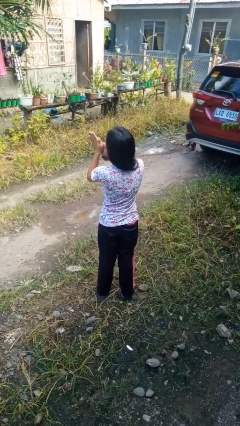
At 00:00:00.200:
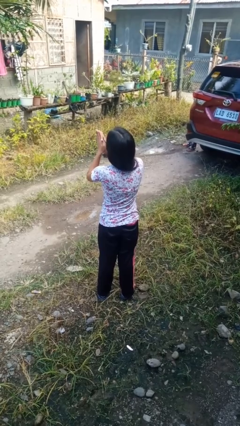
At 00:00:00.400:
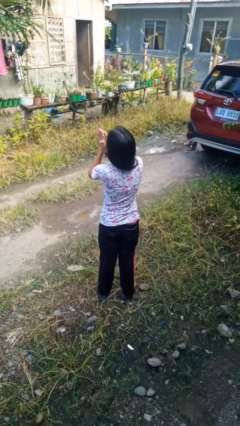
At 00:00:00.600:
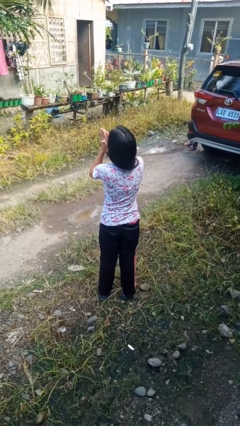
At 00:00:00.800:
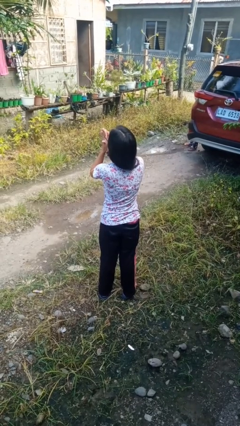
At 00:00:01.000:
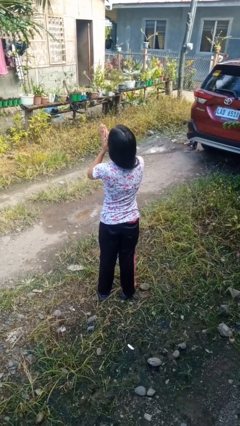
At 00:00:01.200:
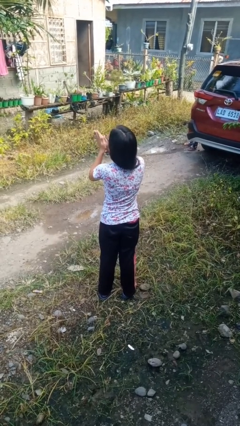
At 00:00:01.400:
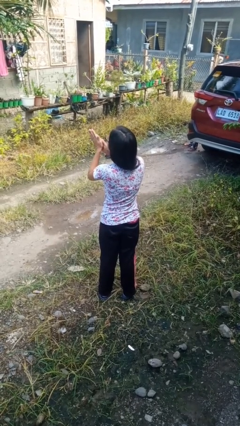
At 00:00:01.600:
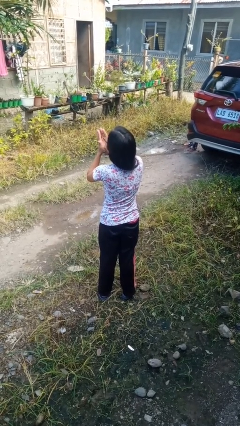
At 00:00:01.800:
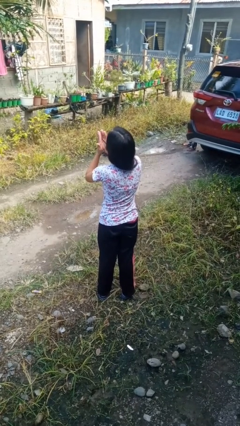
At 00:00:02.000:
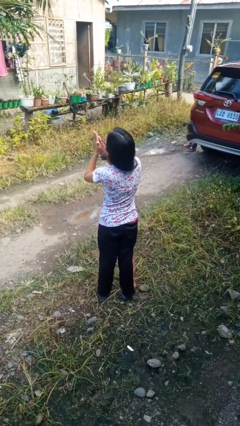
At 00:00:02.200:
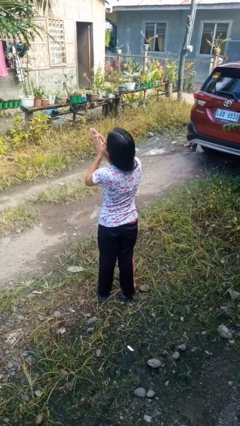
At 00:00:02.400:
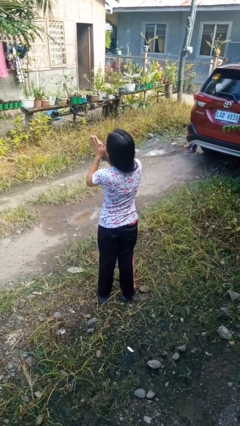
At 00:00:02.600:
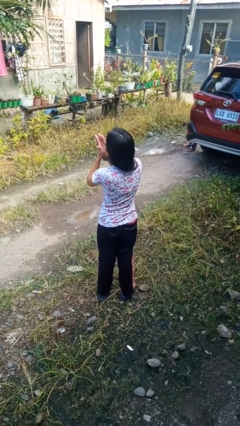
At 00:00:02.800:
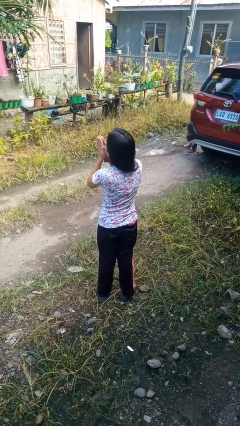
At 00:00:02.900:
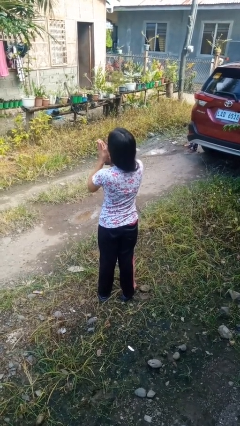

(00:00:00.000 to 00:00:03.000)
person blows into hands

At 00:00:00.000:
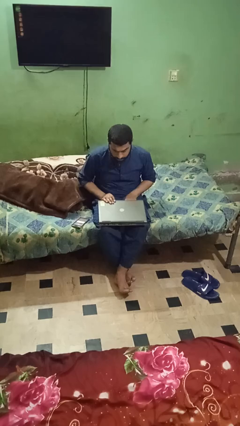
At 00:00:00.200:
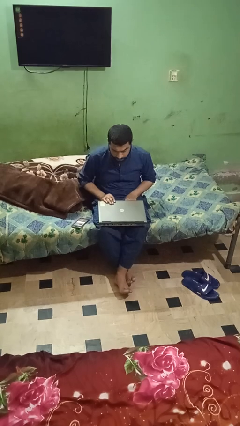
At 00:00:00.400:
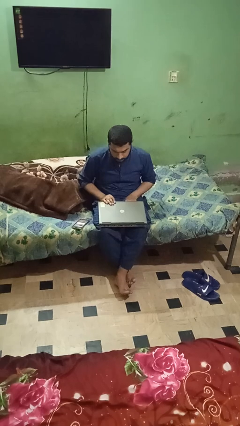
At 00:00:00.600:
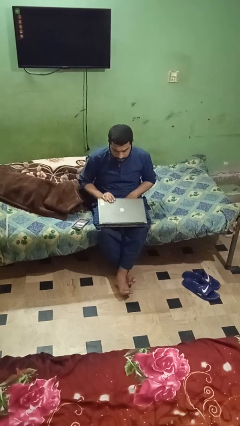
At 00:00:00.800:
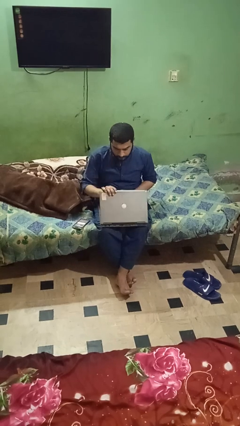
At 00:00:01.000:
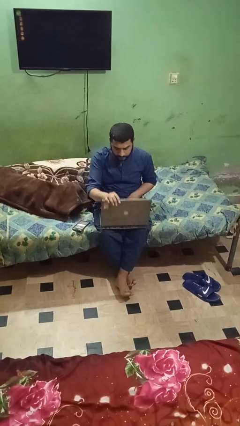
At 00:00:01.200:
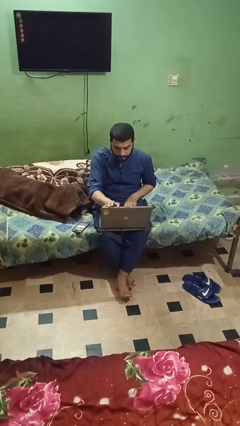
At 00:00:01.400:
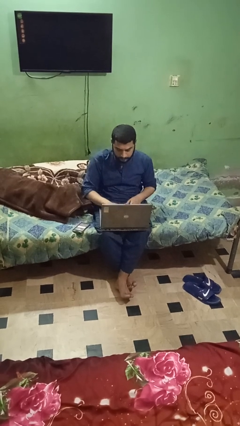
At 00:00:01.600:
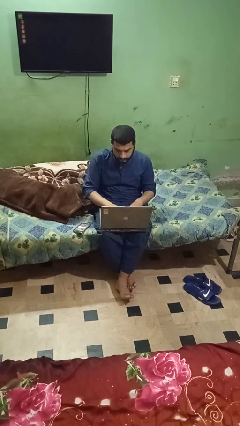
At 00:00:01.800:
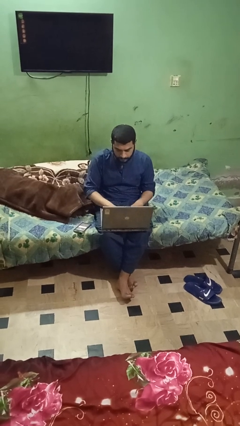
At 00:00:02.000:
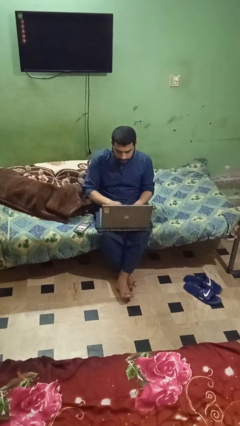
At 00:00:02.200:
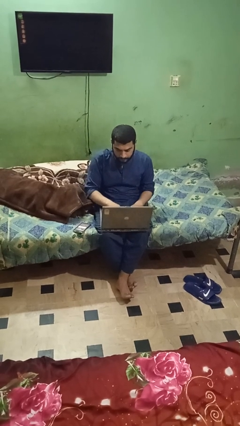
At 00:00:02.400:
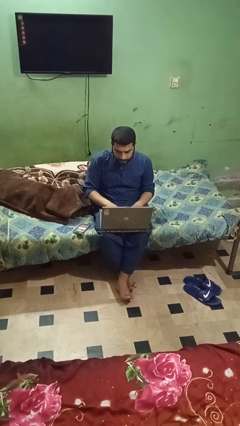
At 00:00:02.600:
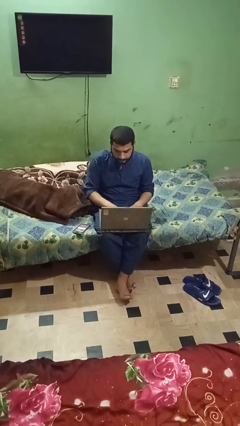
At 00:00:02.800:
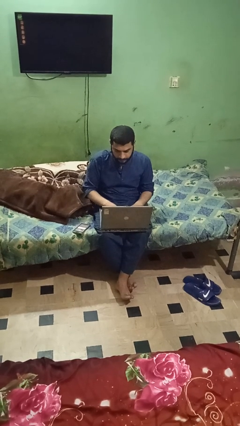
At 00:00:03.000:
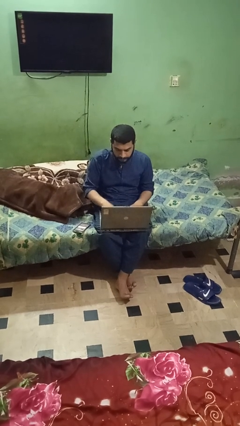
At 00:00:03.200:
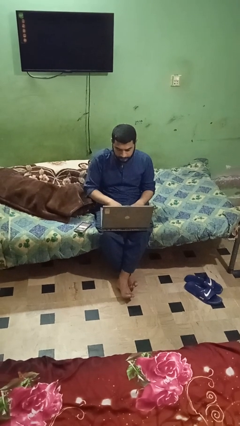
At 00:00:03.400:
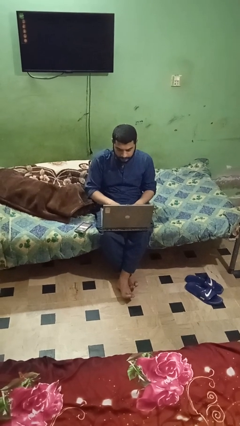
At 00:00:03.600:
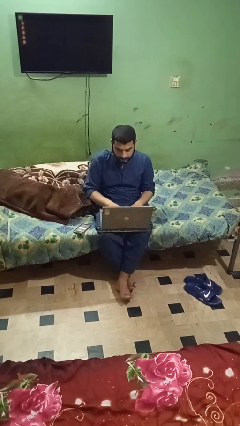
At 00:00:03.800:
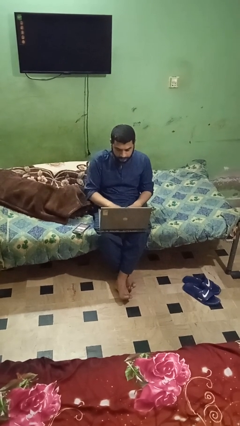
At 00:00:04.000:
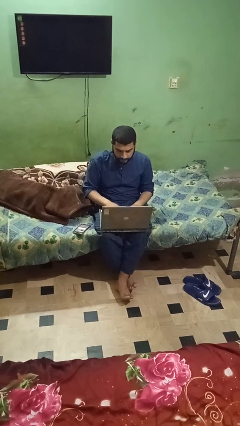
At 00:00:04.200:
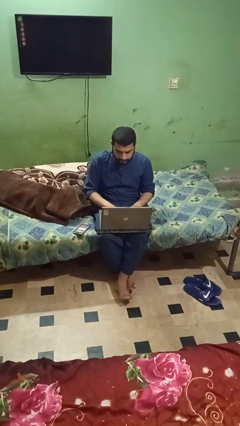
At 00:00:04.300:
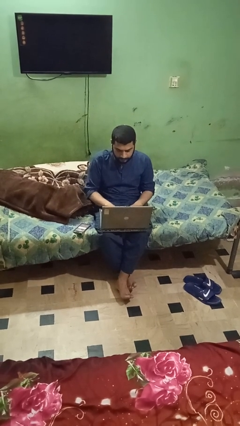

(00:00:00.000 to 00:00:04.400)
person opens laptop

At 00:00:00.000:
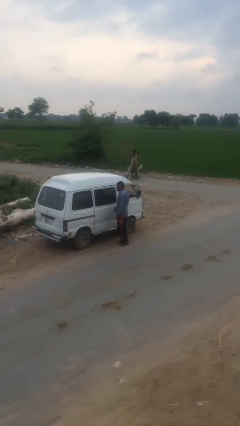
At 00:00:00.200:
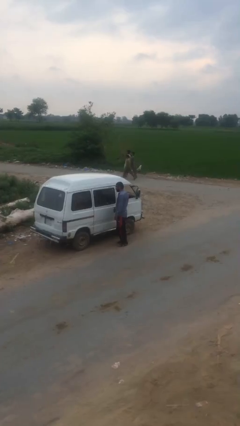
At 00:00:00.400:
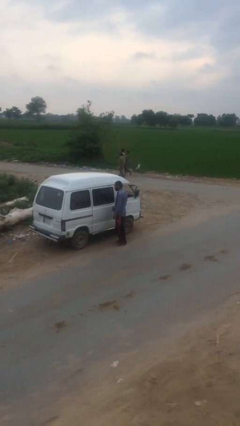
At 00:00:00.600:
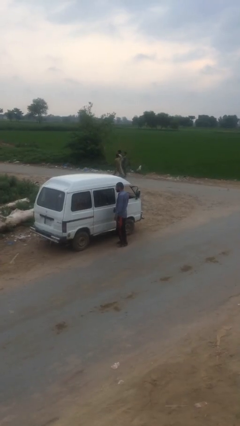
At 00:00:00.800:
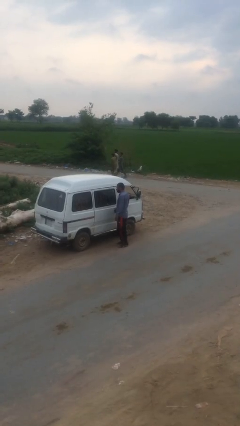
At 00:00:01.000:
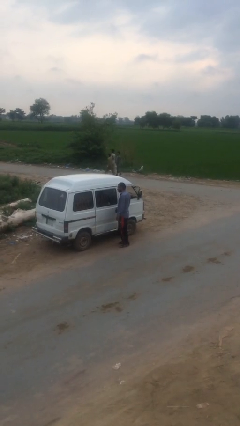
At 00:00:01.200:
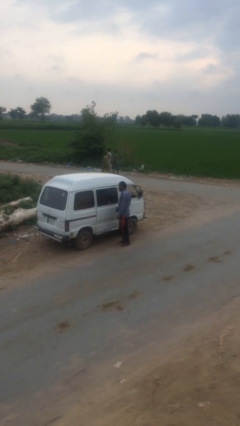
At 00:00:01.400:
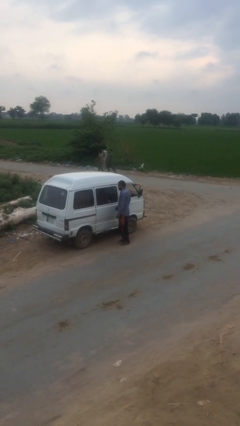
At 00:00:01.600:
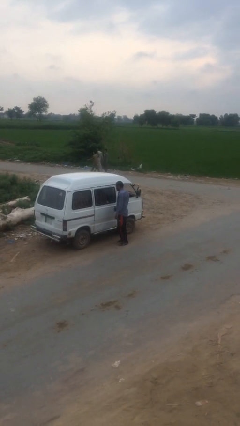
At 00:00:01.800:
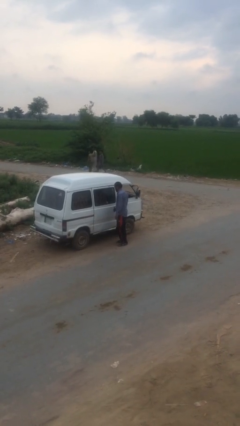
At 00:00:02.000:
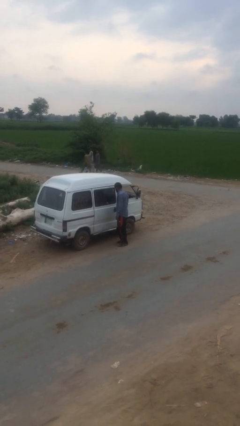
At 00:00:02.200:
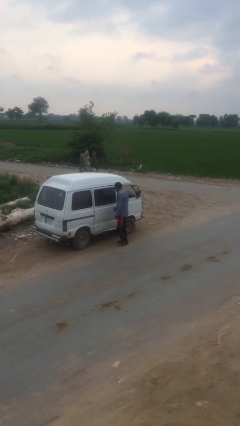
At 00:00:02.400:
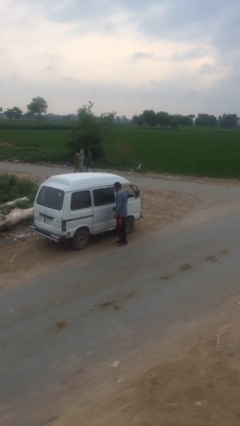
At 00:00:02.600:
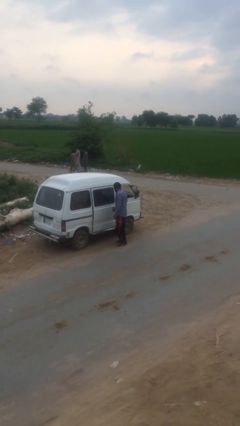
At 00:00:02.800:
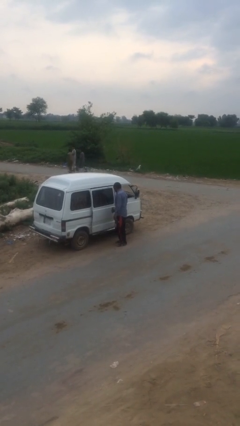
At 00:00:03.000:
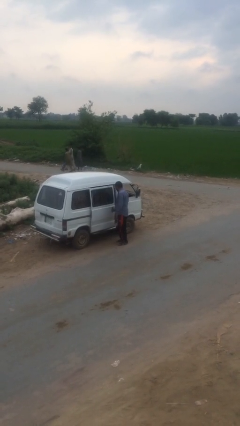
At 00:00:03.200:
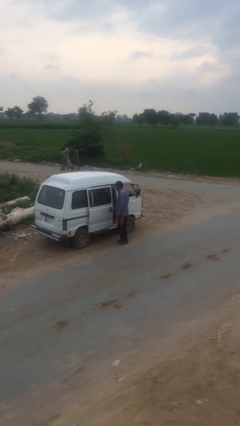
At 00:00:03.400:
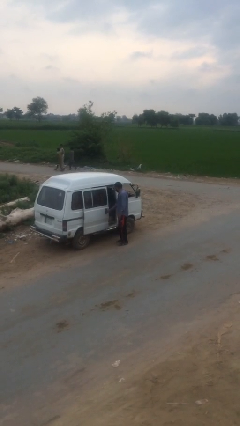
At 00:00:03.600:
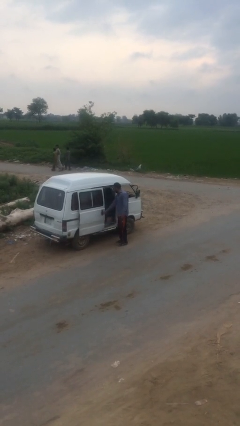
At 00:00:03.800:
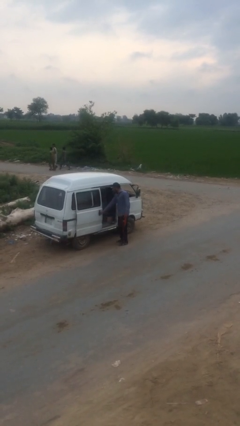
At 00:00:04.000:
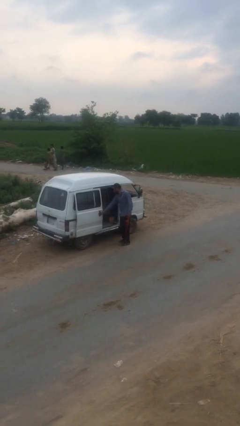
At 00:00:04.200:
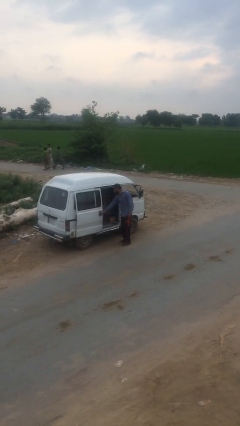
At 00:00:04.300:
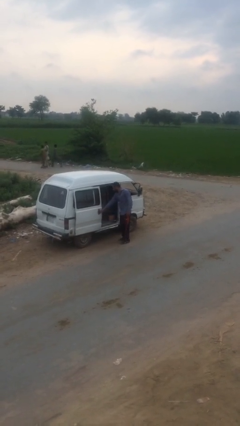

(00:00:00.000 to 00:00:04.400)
person opens car door

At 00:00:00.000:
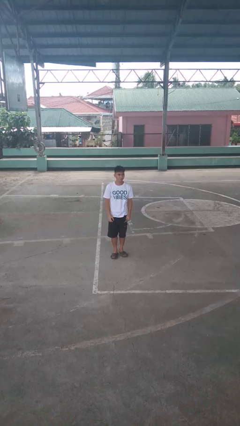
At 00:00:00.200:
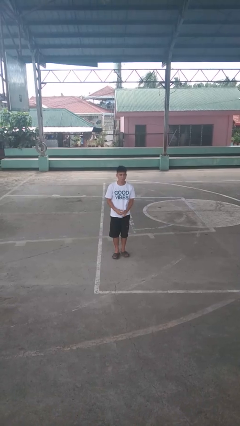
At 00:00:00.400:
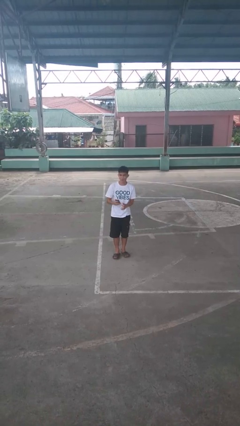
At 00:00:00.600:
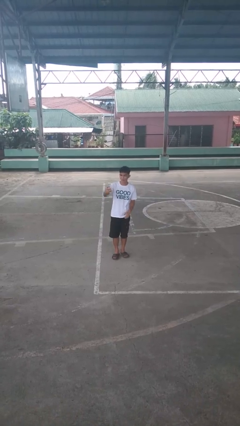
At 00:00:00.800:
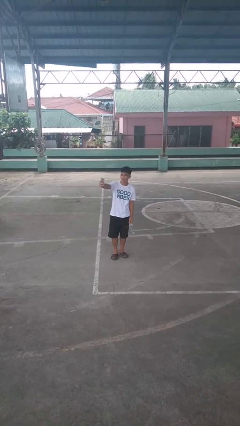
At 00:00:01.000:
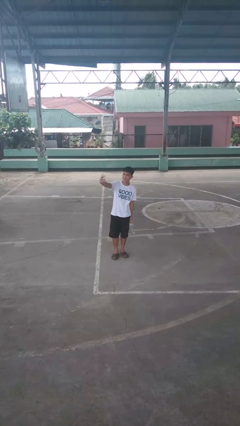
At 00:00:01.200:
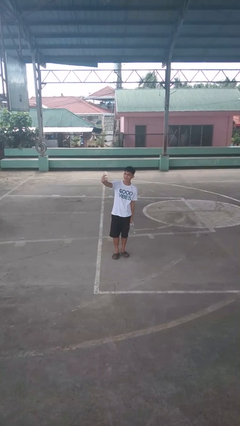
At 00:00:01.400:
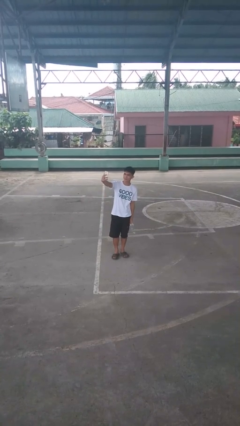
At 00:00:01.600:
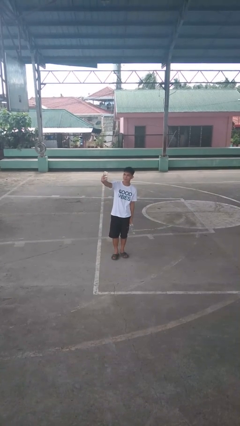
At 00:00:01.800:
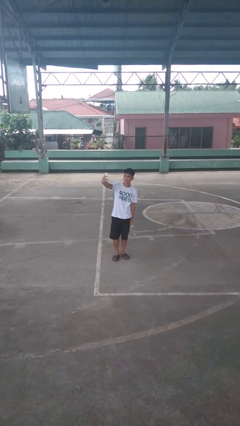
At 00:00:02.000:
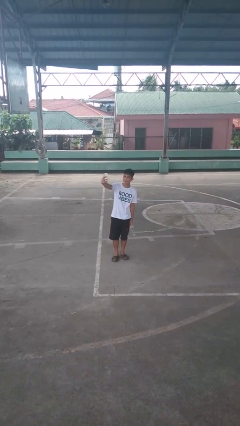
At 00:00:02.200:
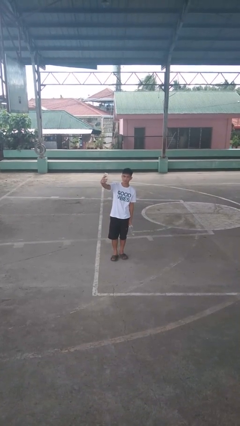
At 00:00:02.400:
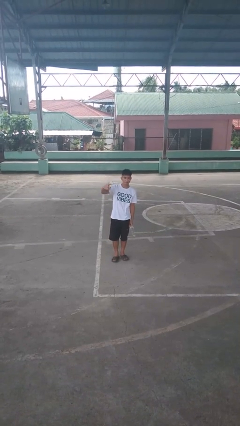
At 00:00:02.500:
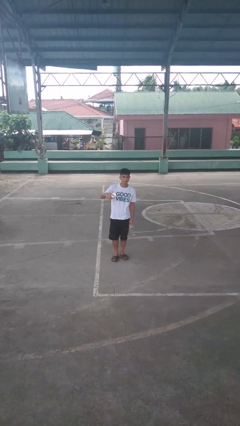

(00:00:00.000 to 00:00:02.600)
person takes selfie

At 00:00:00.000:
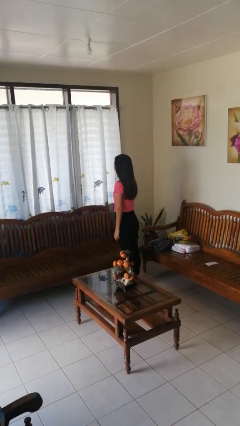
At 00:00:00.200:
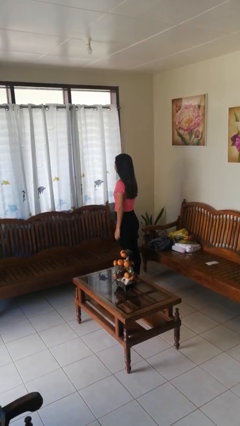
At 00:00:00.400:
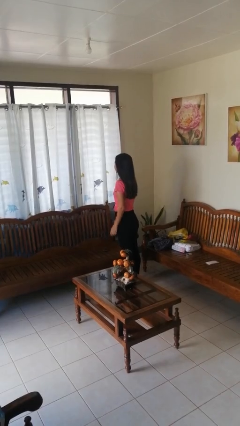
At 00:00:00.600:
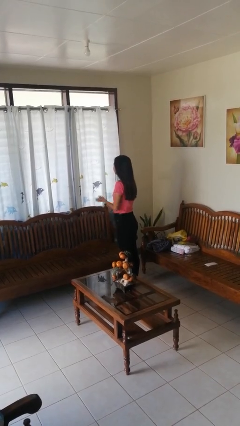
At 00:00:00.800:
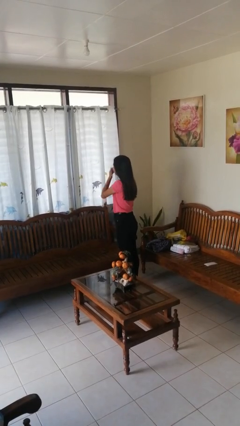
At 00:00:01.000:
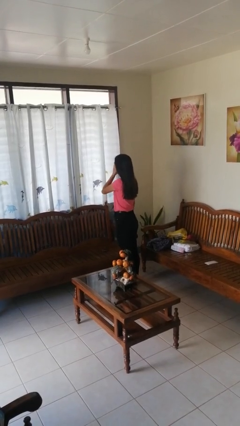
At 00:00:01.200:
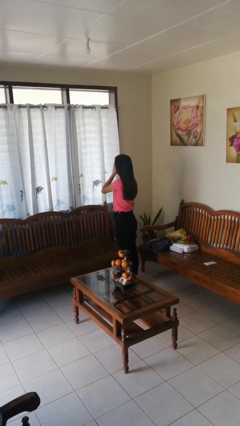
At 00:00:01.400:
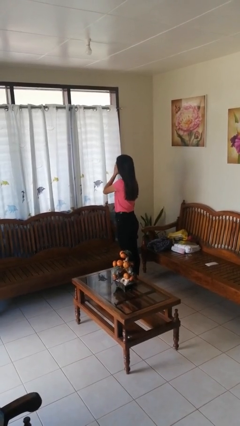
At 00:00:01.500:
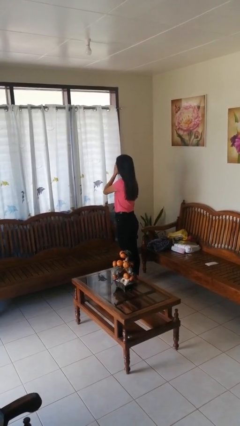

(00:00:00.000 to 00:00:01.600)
person yawns

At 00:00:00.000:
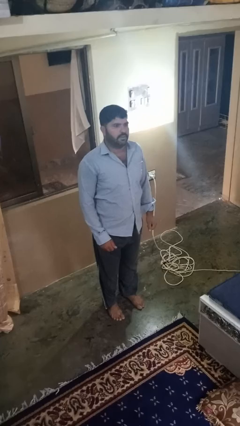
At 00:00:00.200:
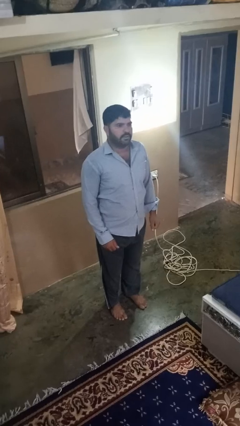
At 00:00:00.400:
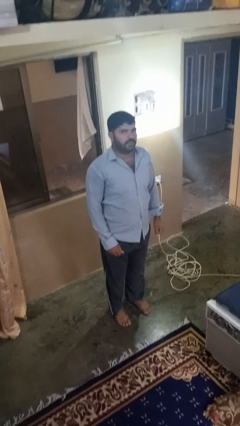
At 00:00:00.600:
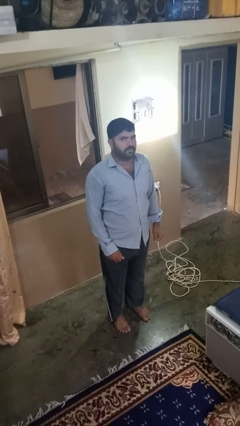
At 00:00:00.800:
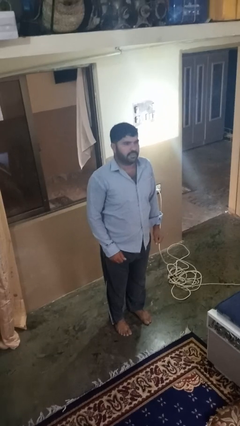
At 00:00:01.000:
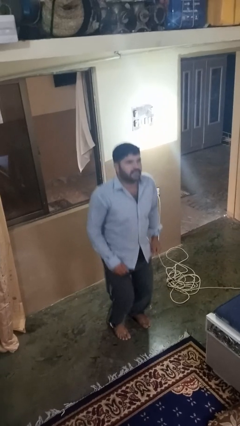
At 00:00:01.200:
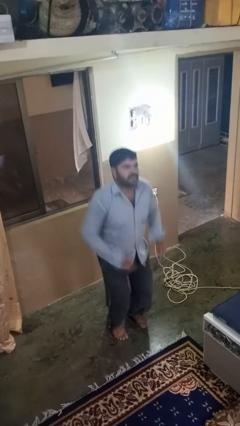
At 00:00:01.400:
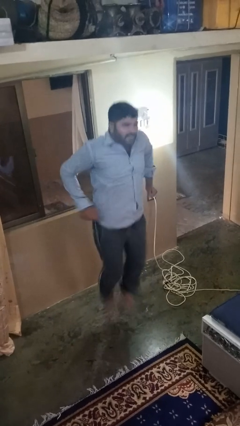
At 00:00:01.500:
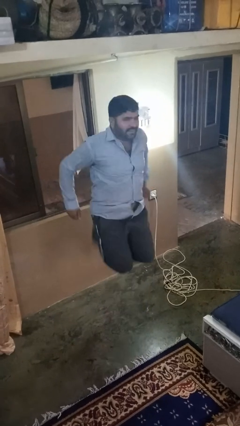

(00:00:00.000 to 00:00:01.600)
person jumps
